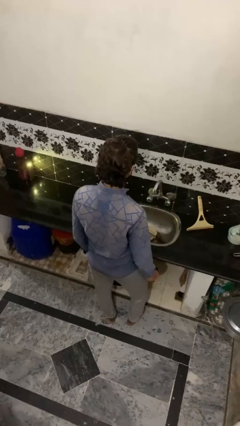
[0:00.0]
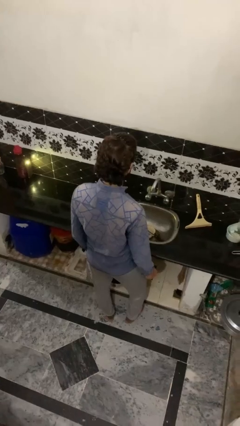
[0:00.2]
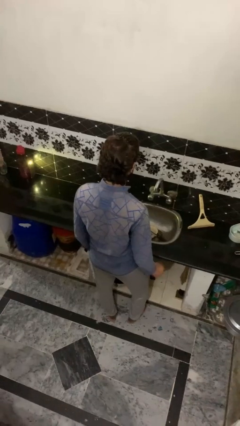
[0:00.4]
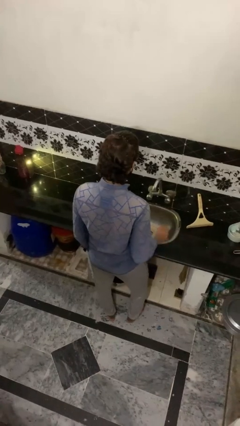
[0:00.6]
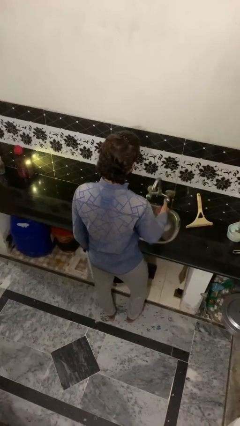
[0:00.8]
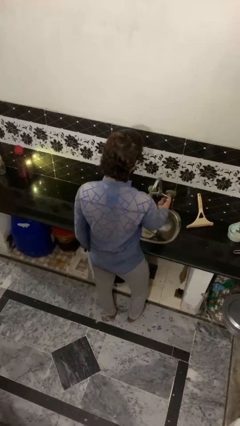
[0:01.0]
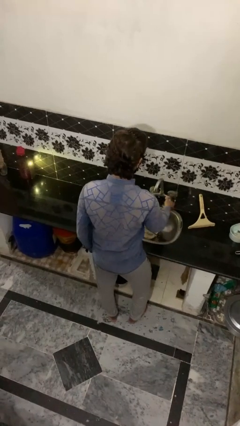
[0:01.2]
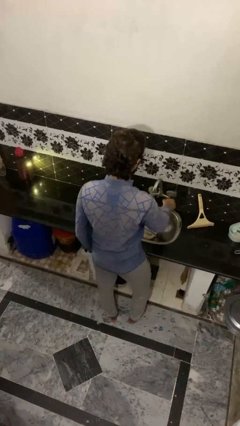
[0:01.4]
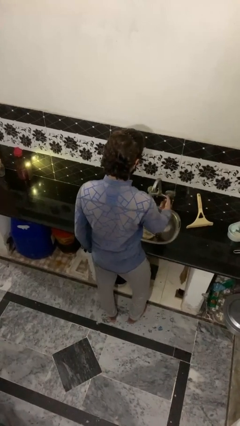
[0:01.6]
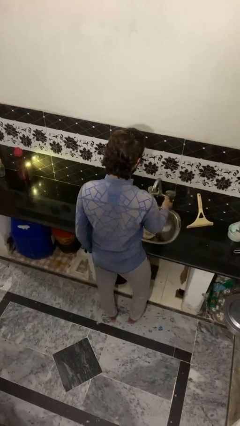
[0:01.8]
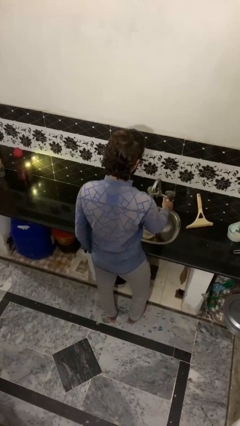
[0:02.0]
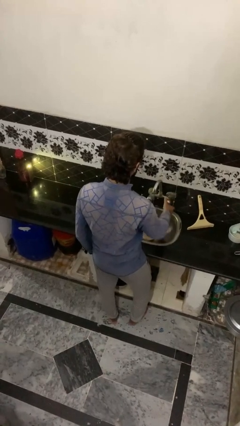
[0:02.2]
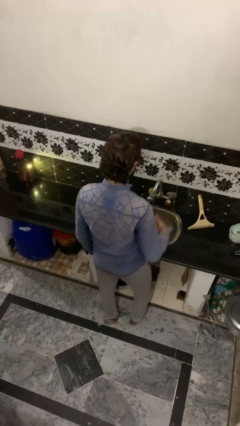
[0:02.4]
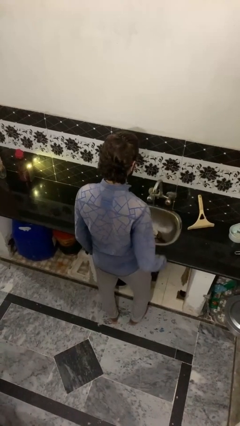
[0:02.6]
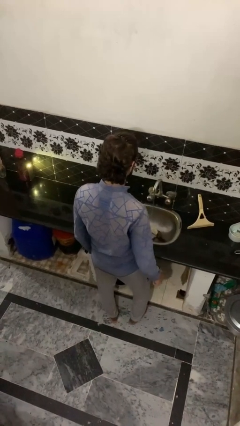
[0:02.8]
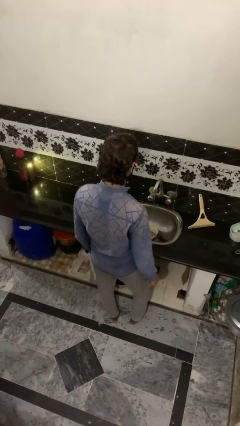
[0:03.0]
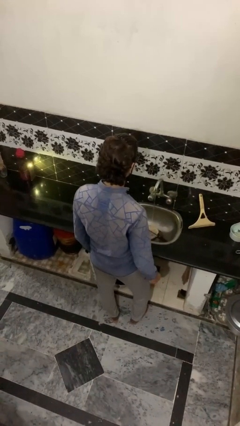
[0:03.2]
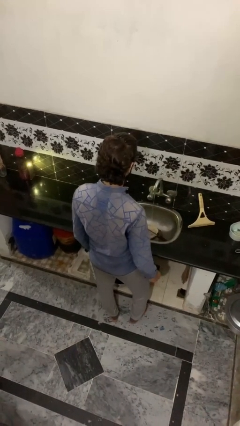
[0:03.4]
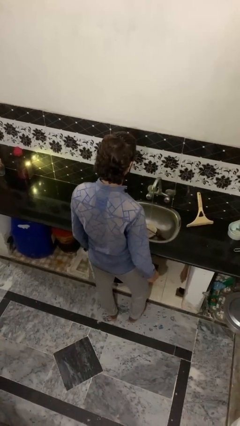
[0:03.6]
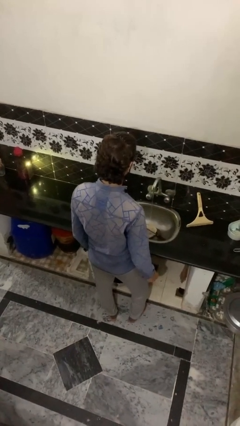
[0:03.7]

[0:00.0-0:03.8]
person turns on faucet

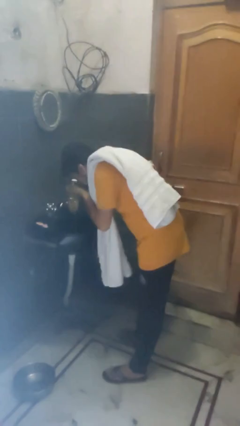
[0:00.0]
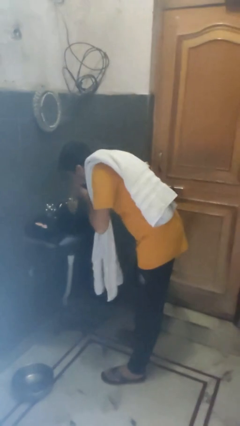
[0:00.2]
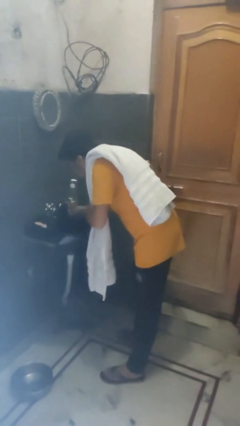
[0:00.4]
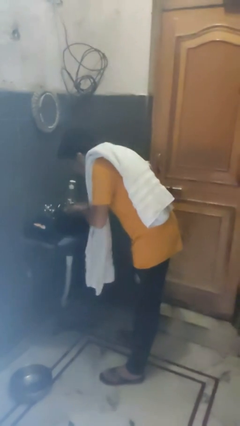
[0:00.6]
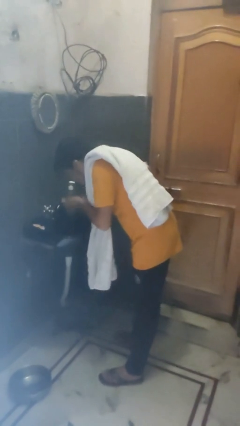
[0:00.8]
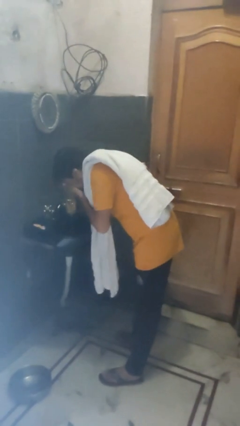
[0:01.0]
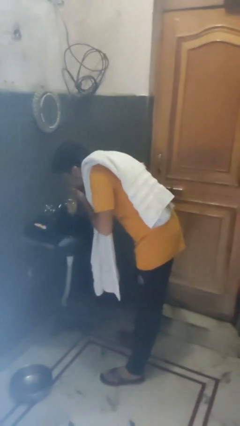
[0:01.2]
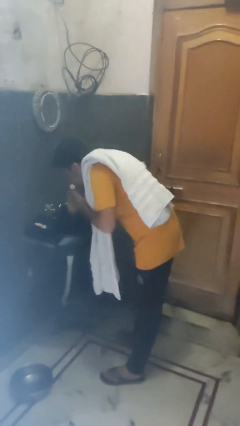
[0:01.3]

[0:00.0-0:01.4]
person washes face

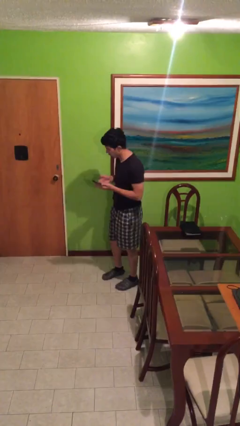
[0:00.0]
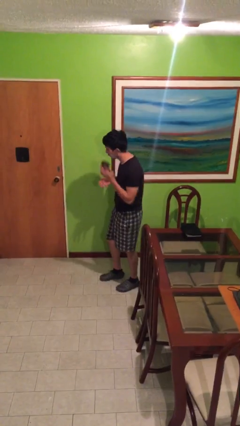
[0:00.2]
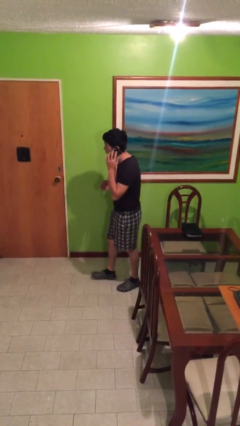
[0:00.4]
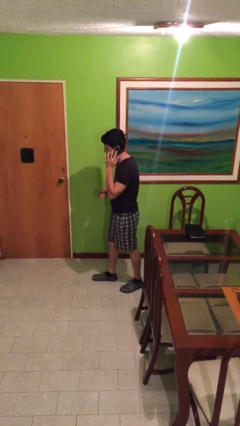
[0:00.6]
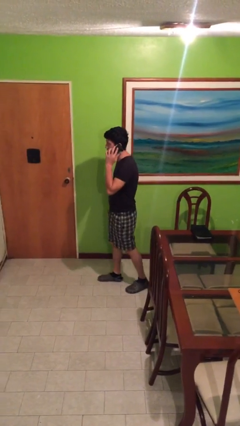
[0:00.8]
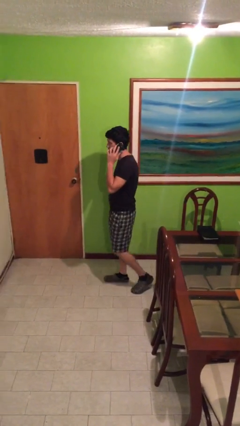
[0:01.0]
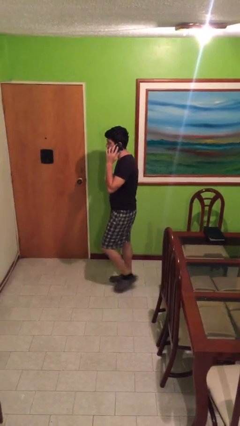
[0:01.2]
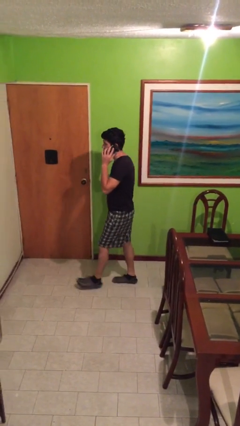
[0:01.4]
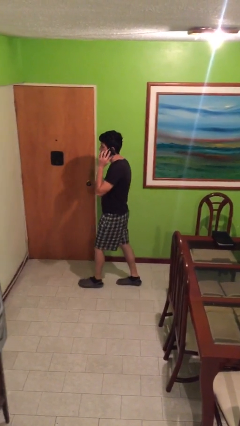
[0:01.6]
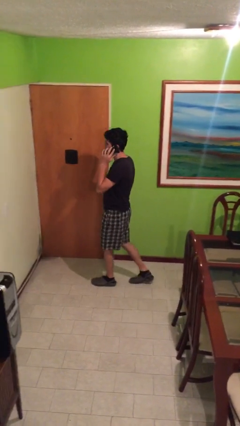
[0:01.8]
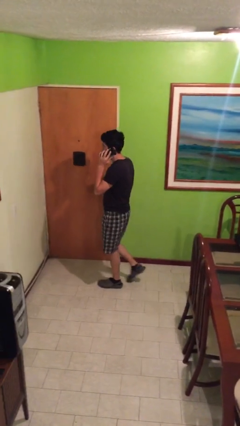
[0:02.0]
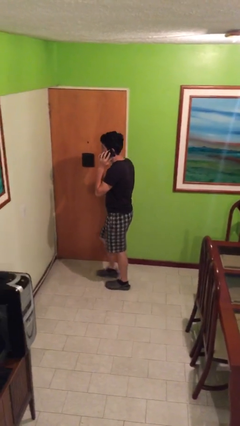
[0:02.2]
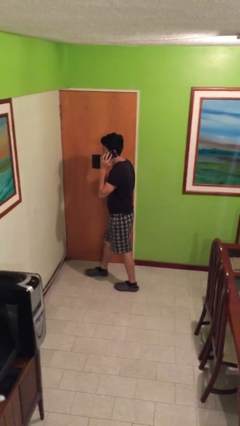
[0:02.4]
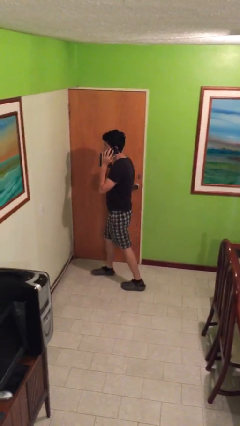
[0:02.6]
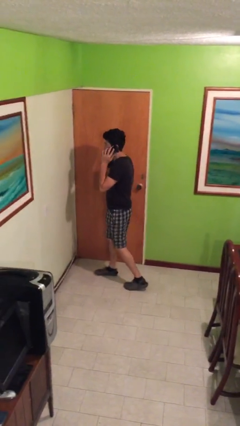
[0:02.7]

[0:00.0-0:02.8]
person talks on phone

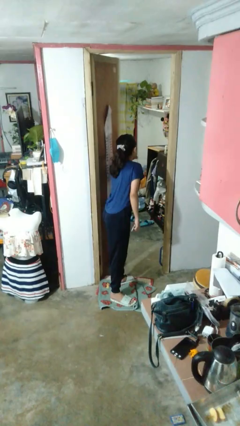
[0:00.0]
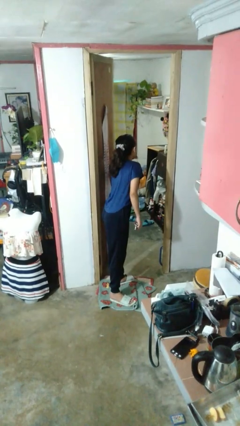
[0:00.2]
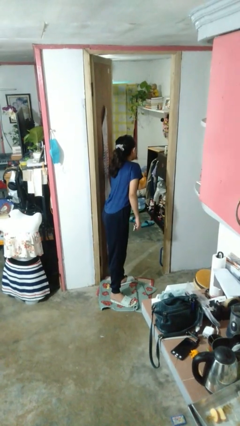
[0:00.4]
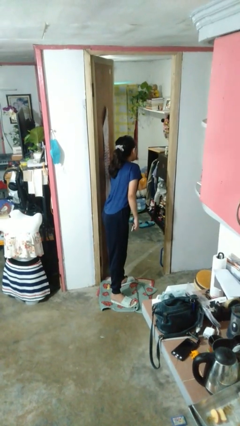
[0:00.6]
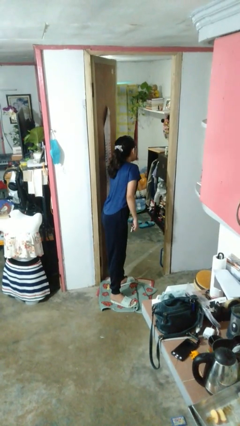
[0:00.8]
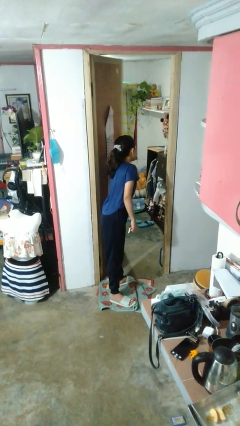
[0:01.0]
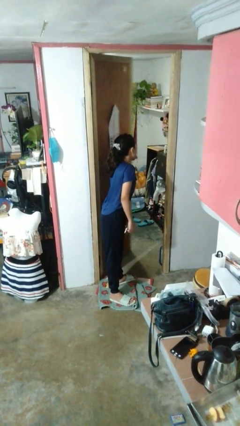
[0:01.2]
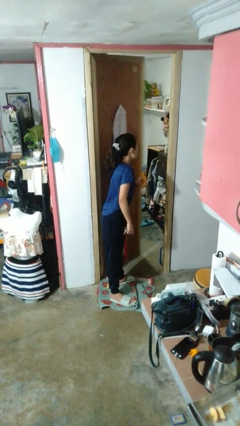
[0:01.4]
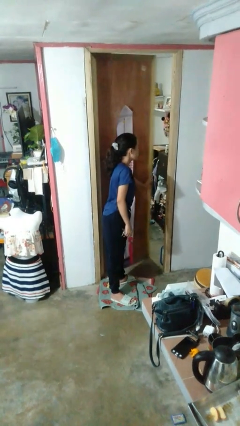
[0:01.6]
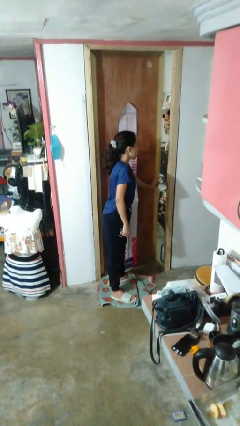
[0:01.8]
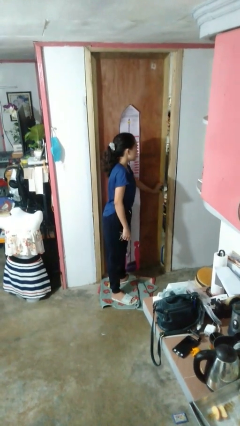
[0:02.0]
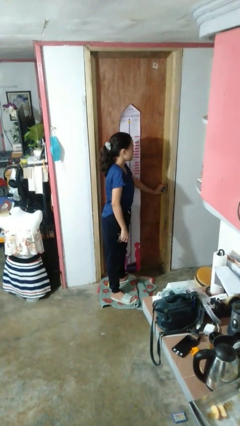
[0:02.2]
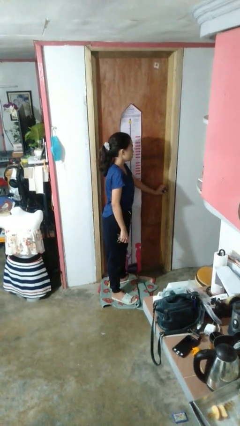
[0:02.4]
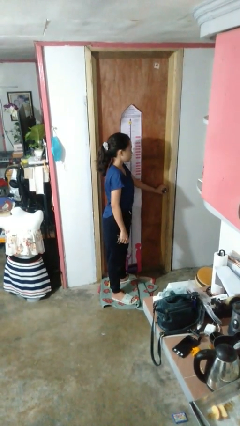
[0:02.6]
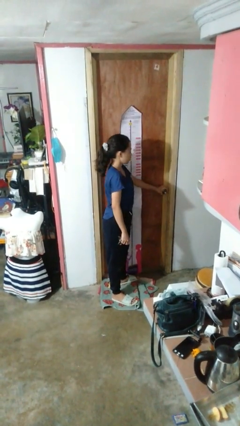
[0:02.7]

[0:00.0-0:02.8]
person closes facility door

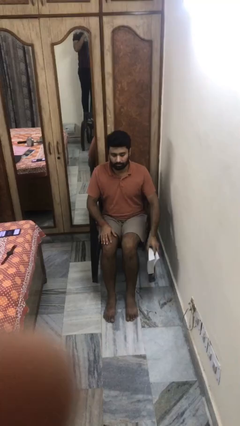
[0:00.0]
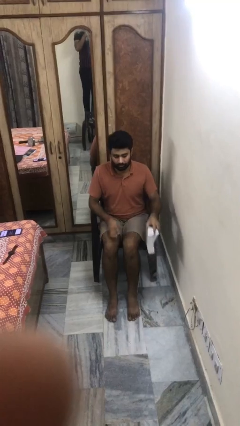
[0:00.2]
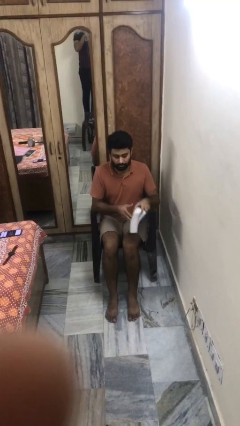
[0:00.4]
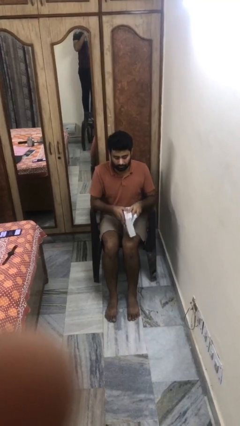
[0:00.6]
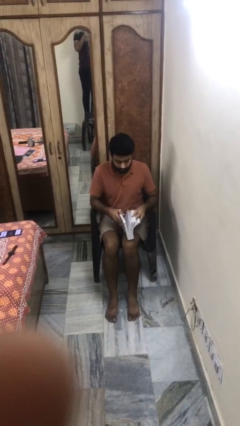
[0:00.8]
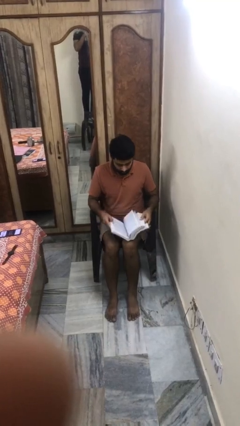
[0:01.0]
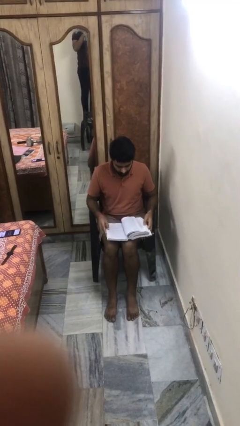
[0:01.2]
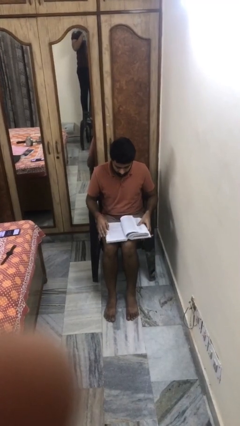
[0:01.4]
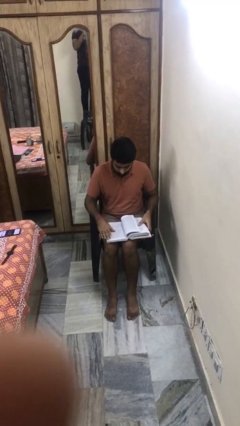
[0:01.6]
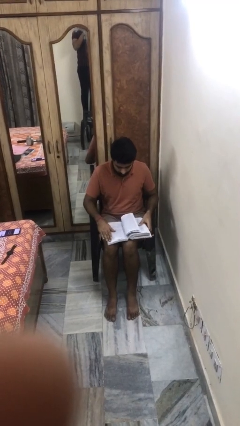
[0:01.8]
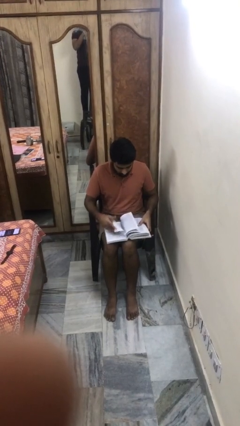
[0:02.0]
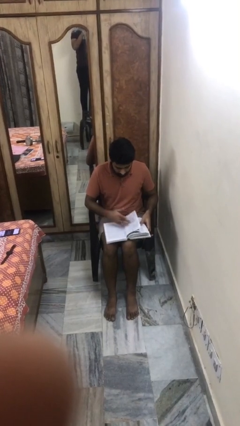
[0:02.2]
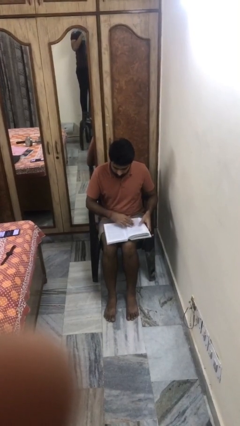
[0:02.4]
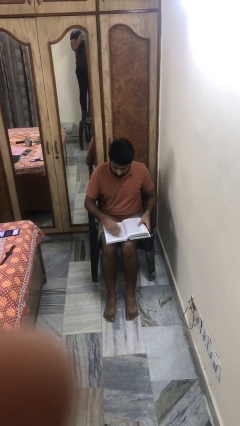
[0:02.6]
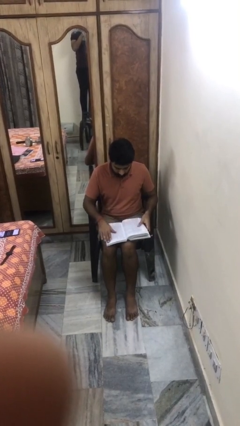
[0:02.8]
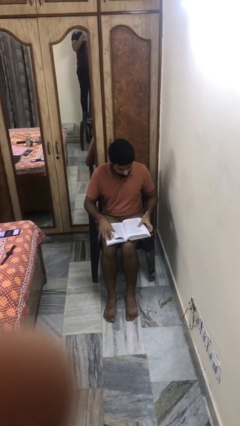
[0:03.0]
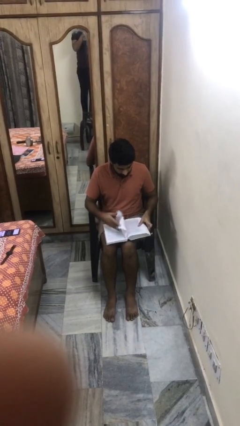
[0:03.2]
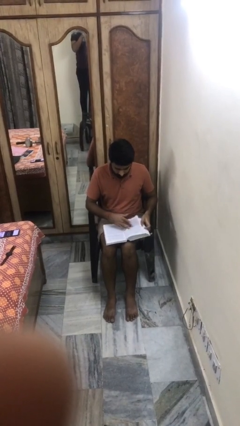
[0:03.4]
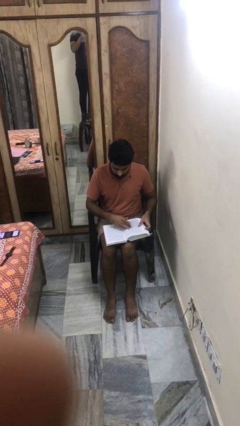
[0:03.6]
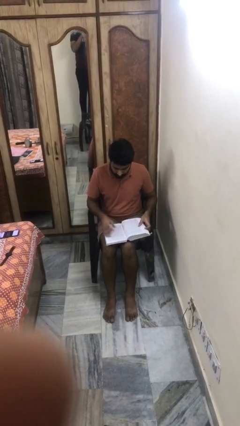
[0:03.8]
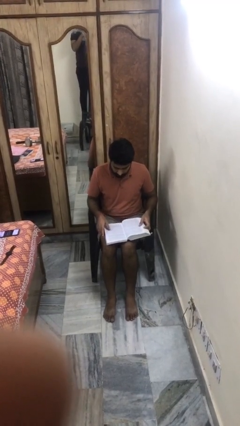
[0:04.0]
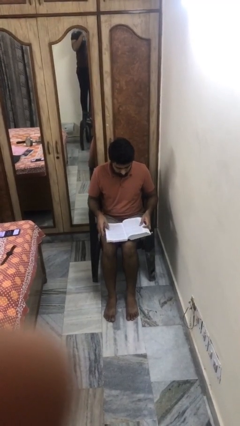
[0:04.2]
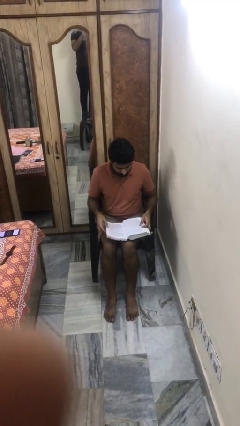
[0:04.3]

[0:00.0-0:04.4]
person reads book

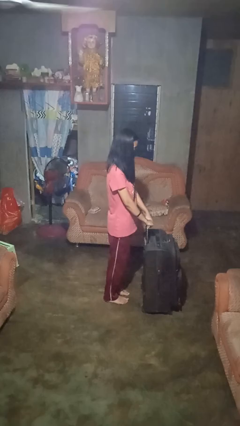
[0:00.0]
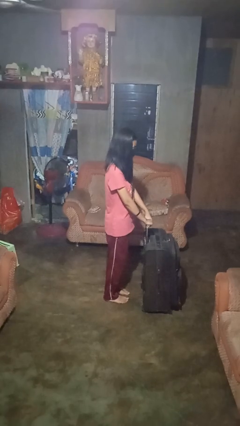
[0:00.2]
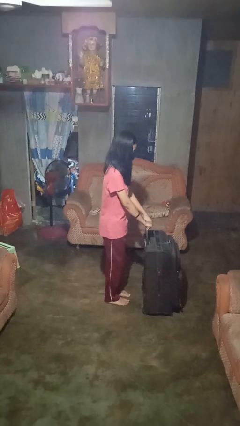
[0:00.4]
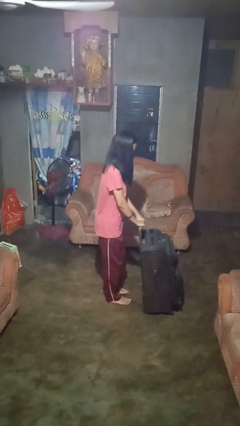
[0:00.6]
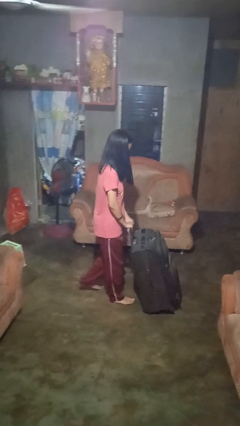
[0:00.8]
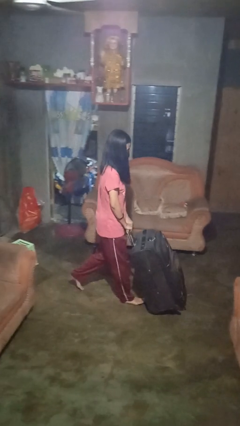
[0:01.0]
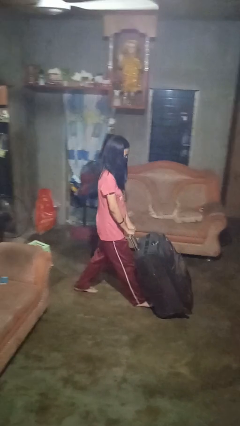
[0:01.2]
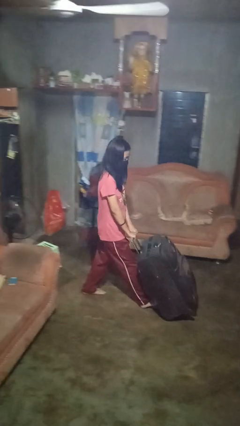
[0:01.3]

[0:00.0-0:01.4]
person pulls wheeled cart

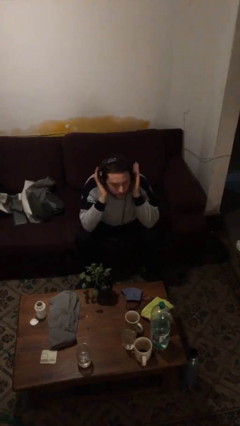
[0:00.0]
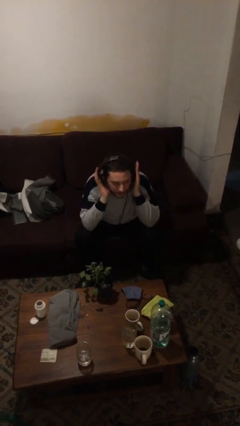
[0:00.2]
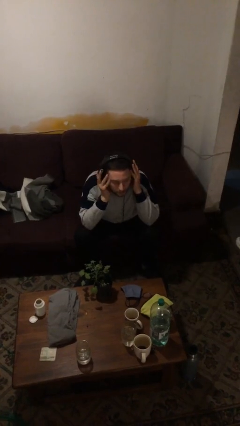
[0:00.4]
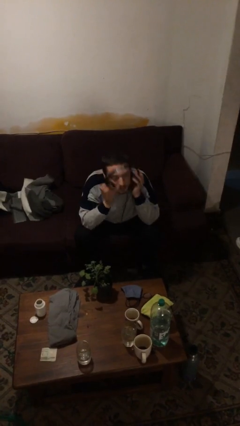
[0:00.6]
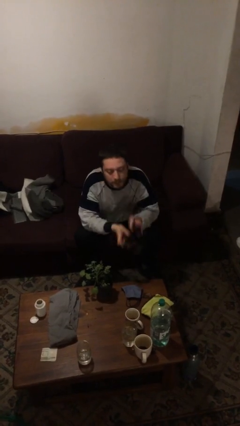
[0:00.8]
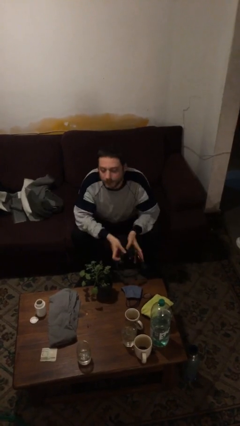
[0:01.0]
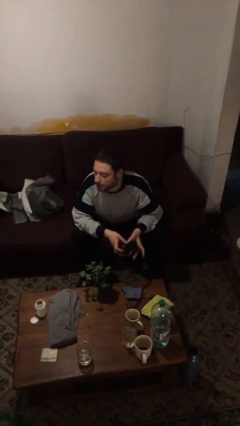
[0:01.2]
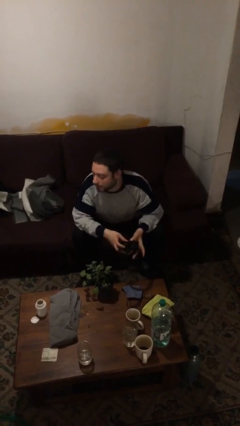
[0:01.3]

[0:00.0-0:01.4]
person takes off headphones
